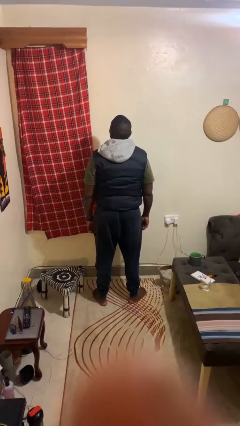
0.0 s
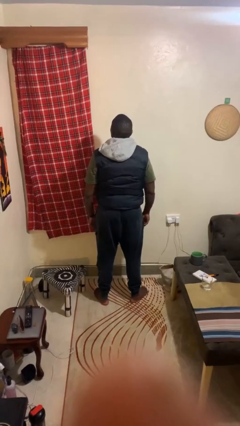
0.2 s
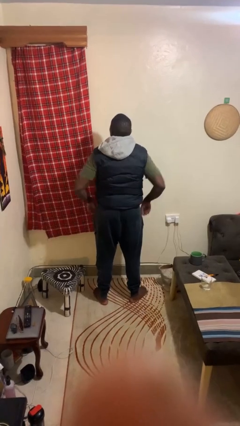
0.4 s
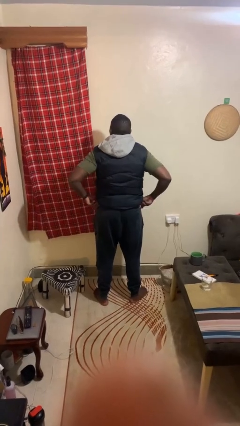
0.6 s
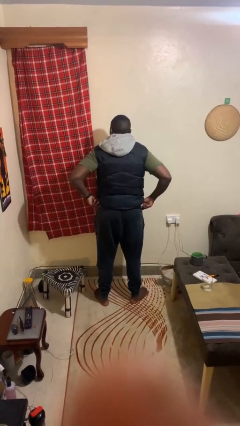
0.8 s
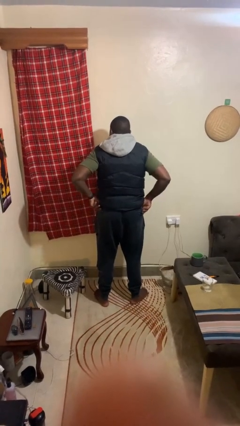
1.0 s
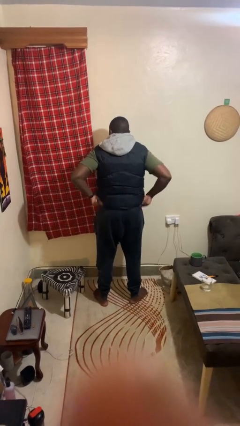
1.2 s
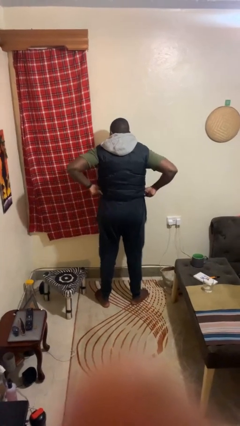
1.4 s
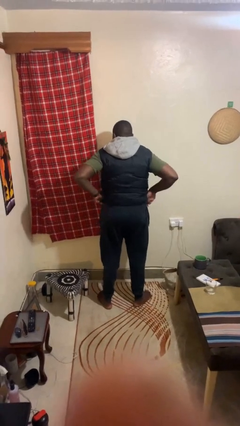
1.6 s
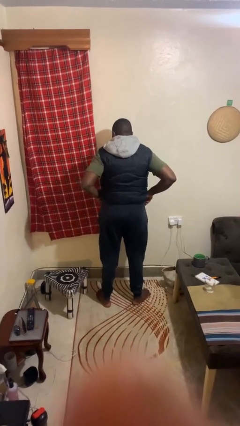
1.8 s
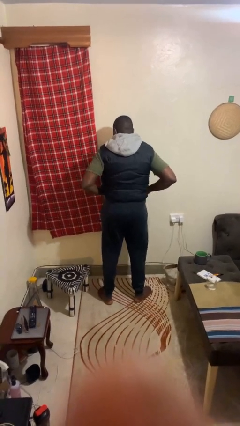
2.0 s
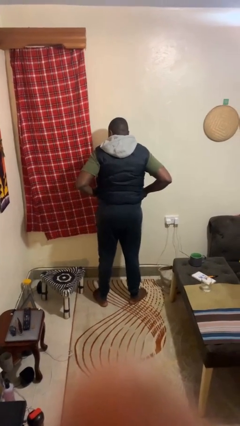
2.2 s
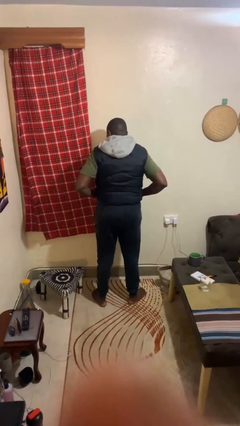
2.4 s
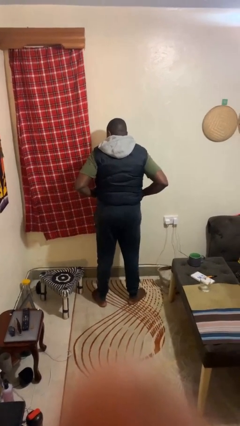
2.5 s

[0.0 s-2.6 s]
person hikes up pants

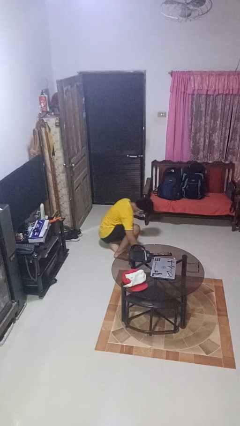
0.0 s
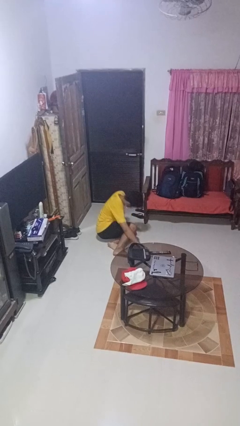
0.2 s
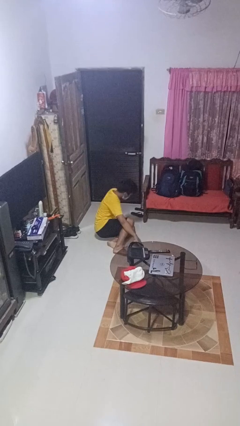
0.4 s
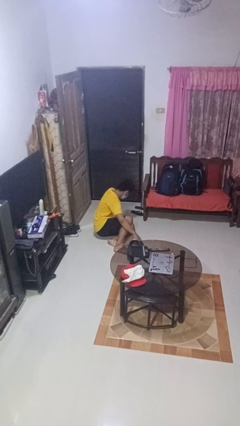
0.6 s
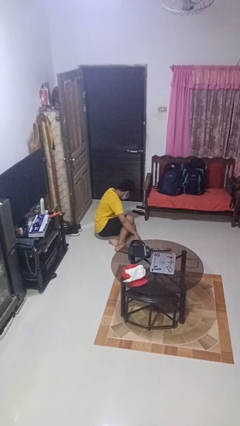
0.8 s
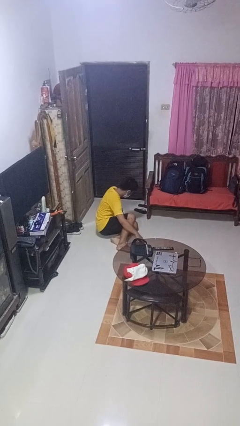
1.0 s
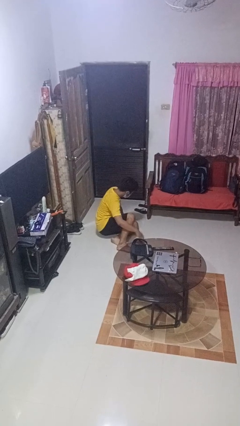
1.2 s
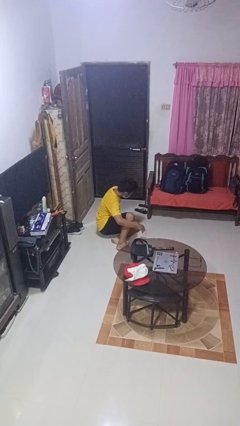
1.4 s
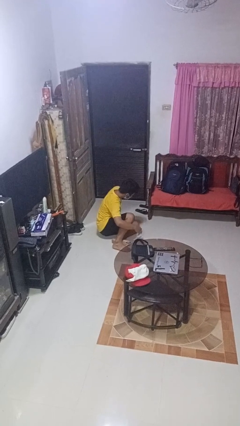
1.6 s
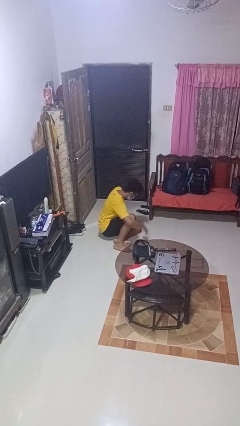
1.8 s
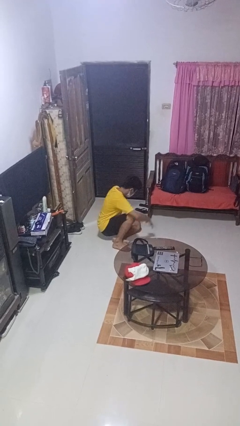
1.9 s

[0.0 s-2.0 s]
person lies down on floor

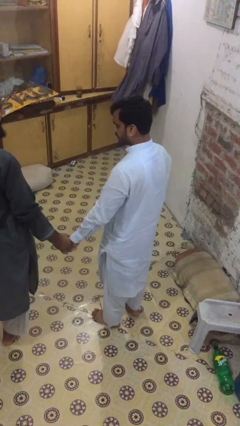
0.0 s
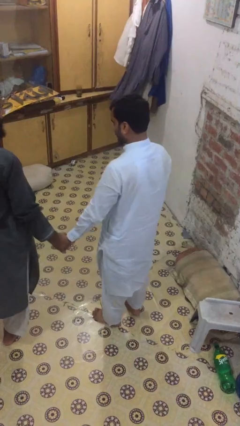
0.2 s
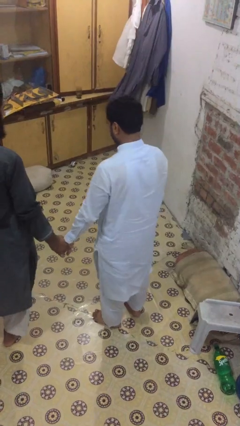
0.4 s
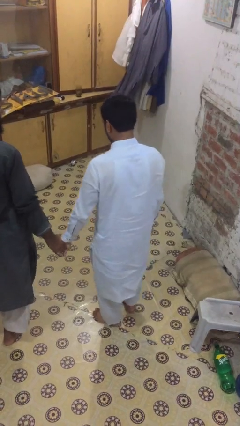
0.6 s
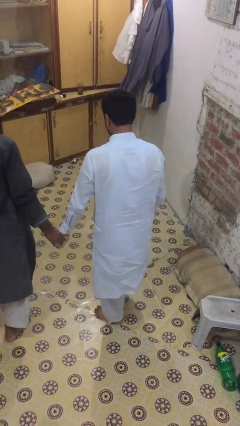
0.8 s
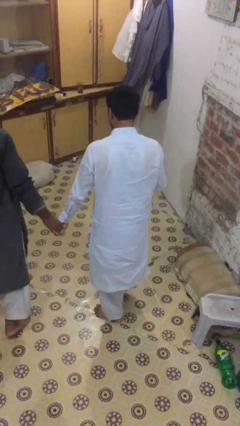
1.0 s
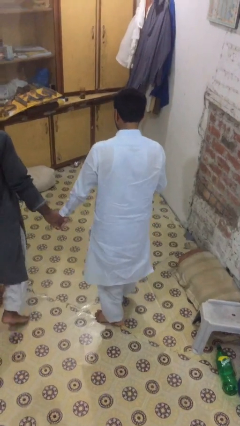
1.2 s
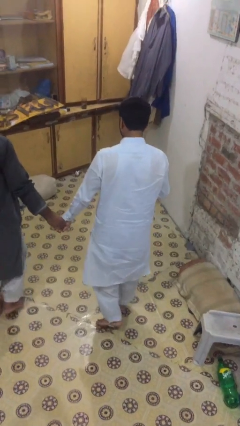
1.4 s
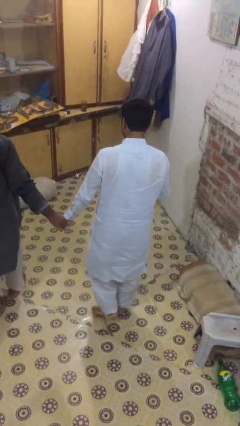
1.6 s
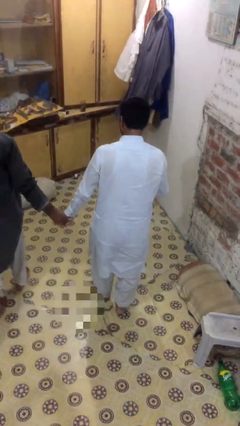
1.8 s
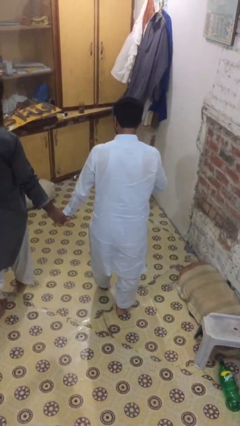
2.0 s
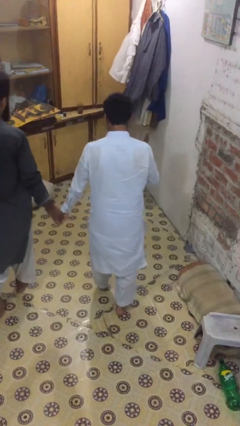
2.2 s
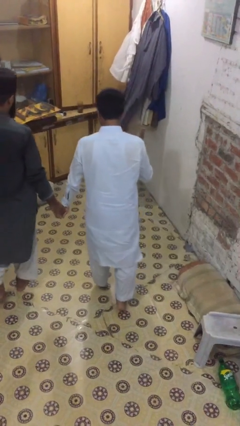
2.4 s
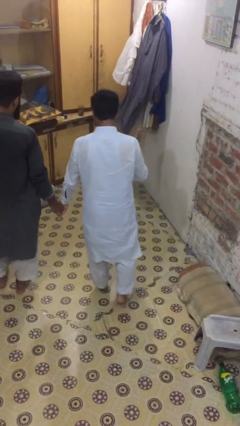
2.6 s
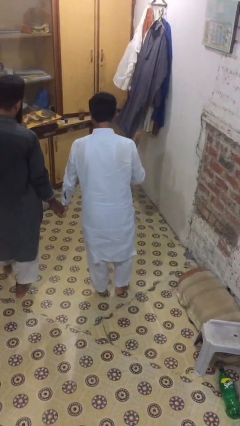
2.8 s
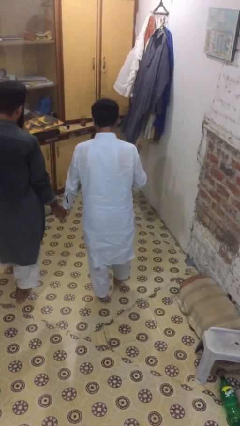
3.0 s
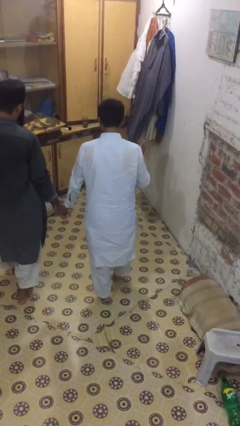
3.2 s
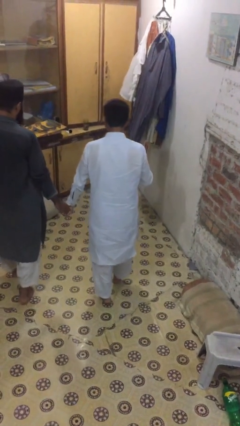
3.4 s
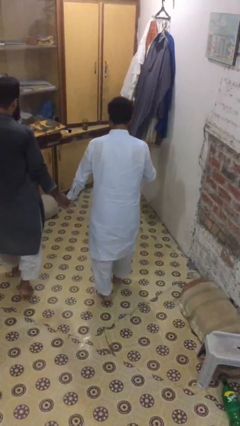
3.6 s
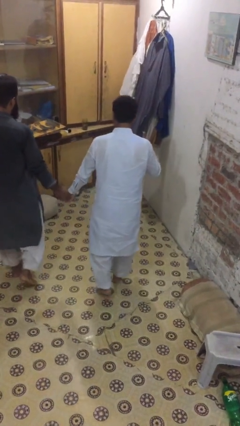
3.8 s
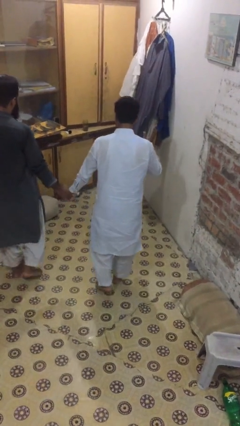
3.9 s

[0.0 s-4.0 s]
person holds hand

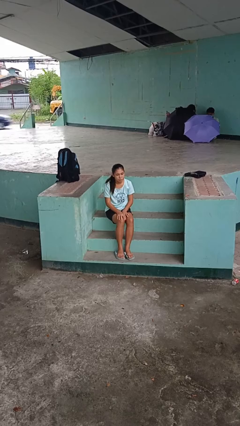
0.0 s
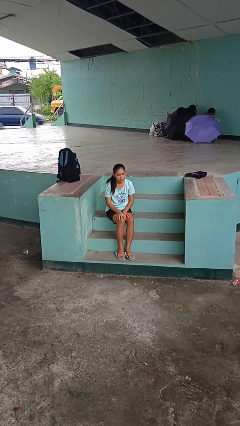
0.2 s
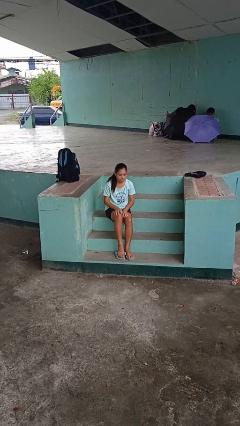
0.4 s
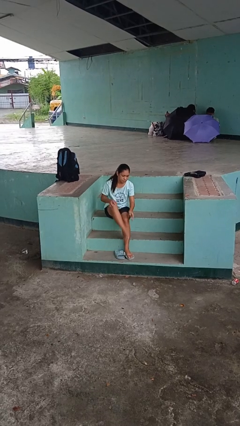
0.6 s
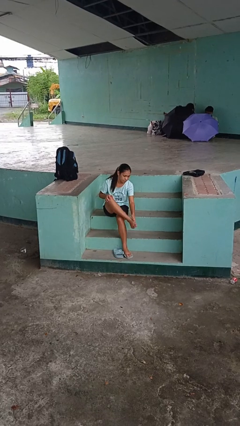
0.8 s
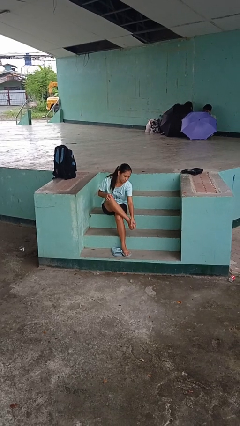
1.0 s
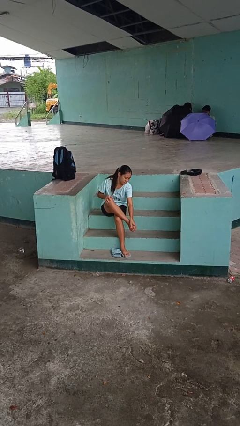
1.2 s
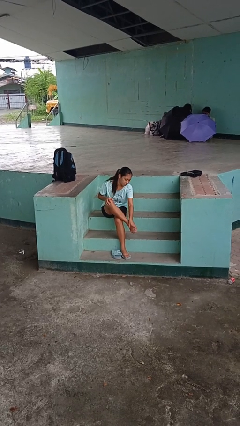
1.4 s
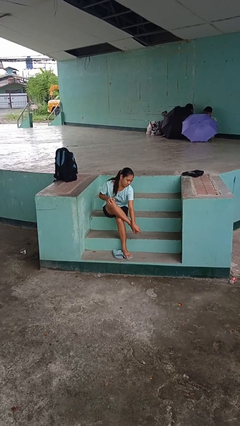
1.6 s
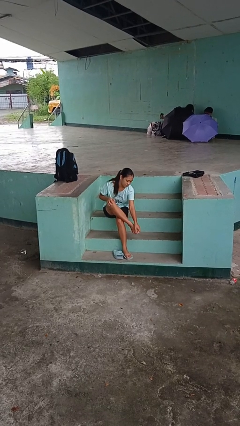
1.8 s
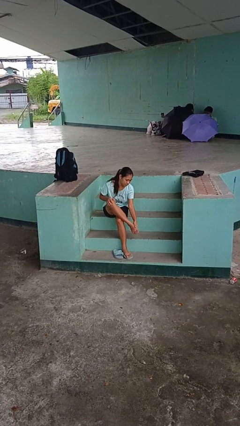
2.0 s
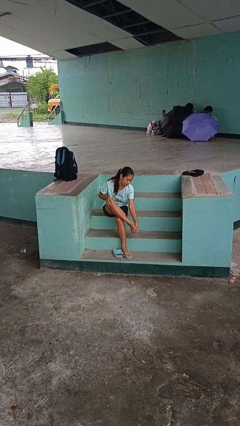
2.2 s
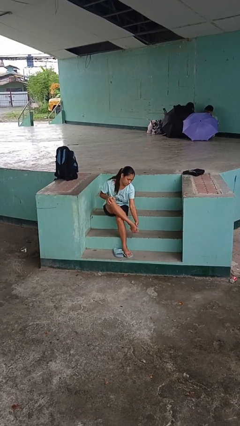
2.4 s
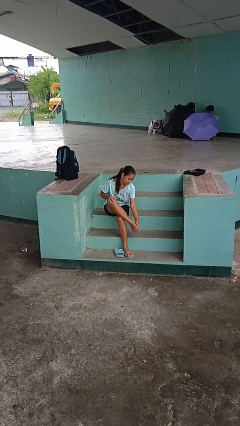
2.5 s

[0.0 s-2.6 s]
person rubs foot

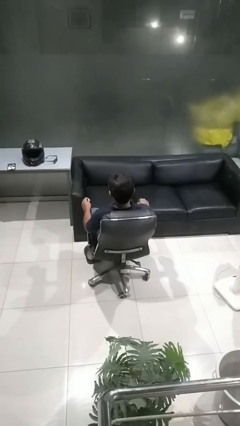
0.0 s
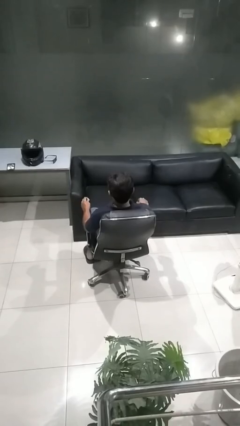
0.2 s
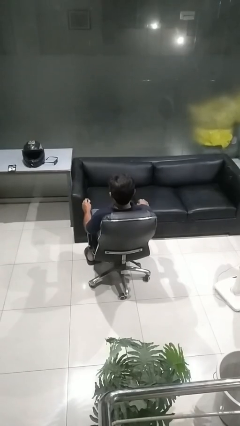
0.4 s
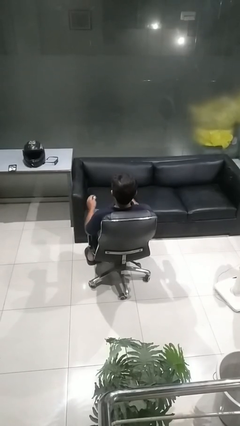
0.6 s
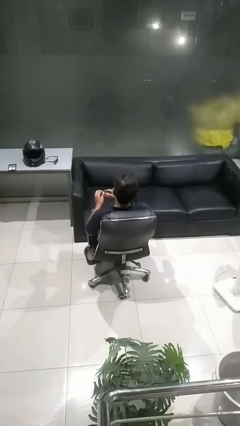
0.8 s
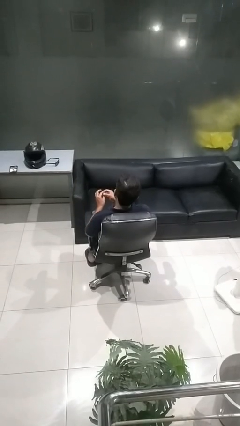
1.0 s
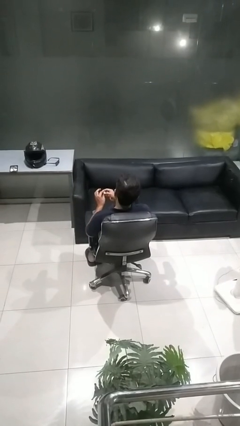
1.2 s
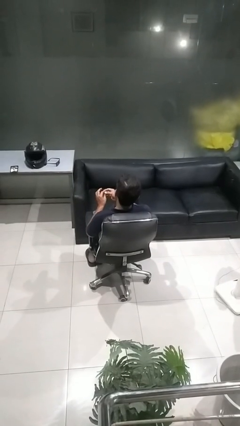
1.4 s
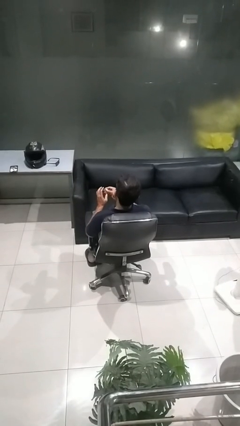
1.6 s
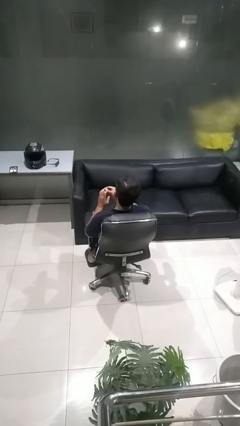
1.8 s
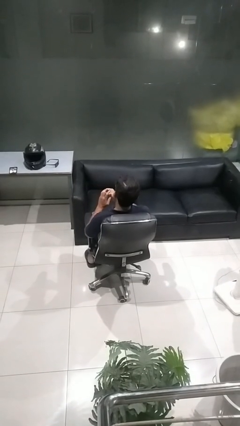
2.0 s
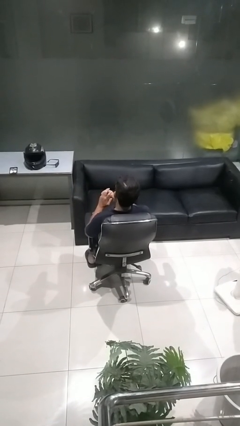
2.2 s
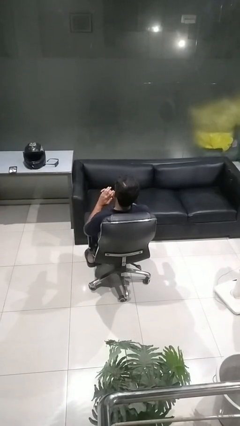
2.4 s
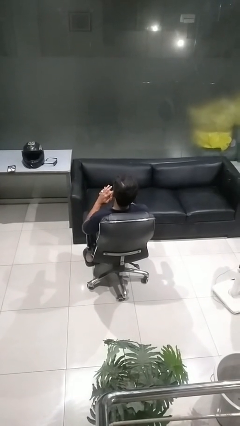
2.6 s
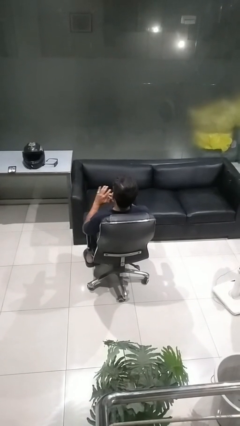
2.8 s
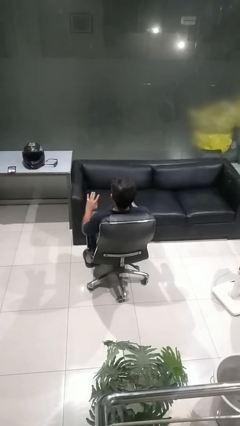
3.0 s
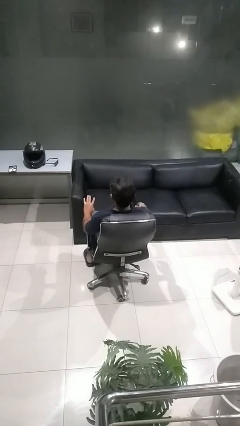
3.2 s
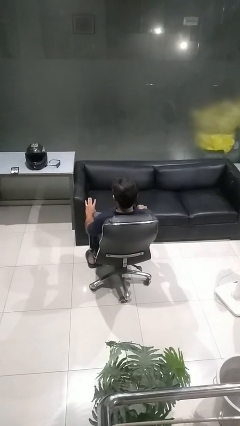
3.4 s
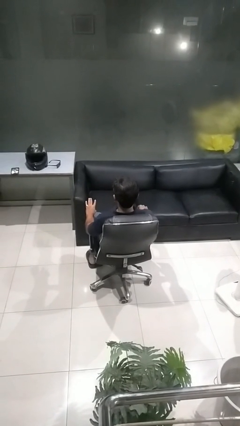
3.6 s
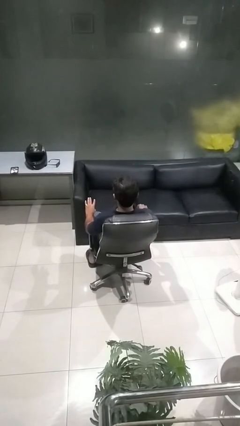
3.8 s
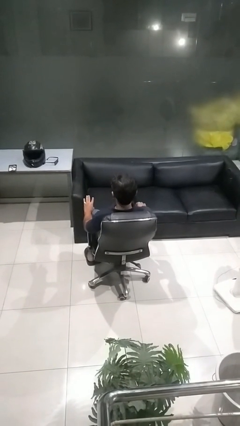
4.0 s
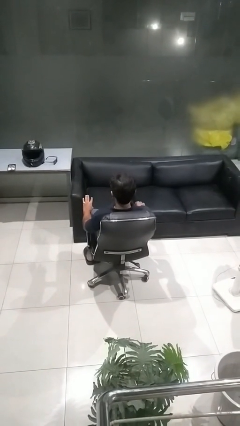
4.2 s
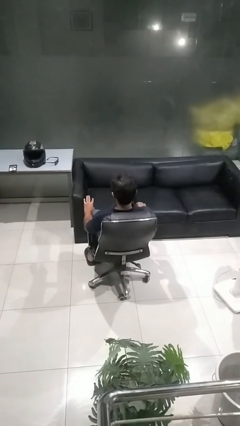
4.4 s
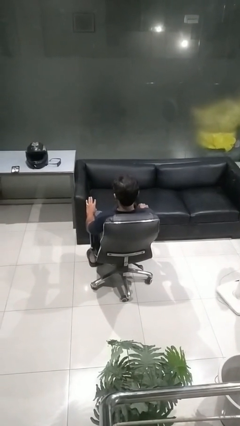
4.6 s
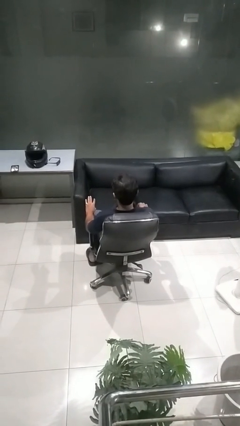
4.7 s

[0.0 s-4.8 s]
person puts on ring

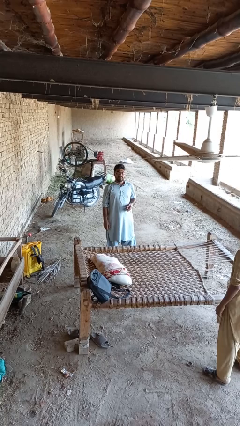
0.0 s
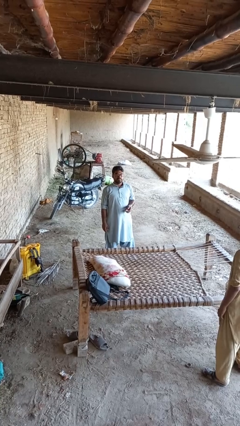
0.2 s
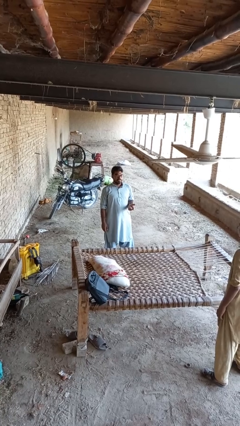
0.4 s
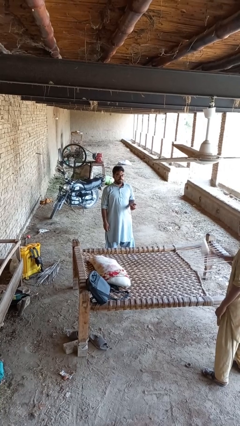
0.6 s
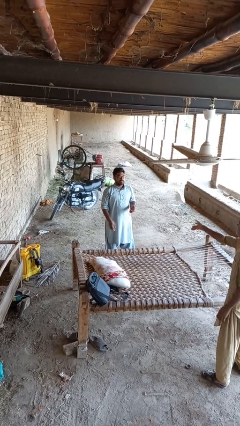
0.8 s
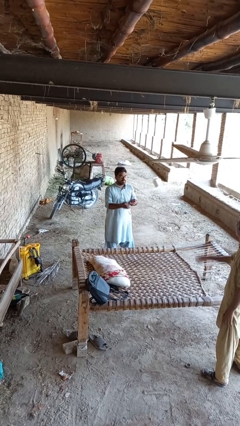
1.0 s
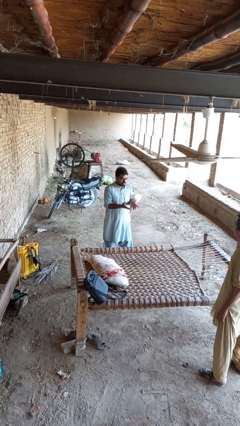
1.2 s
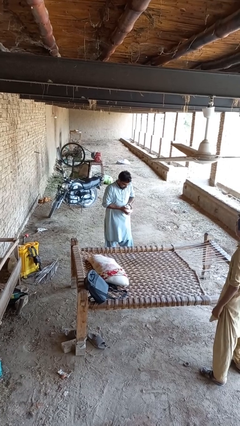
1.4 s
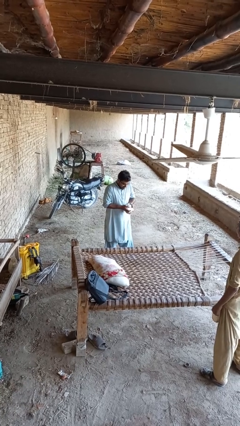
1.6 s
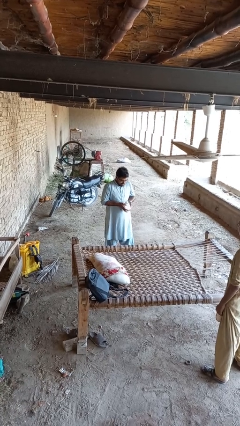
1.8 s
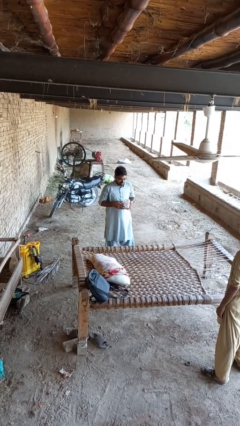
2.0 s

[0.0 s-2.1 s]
person catches object from person
